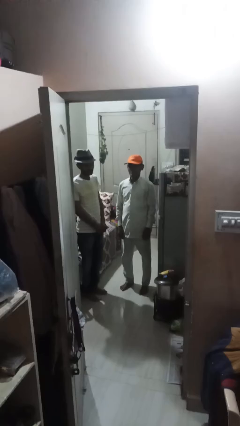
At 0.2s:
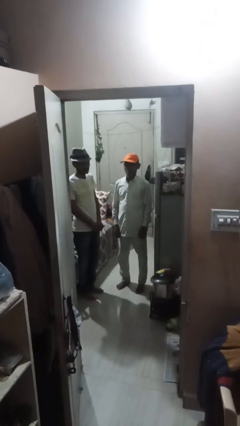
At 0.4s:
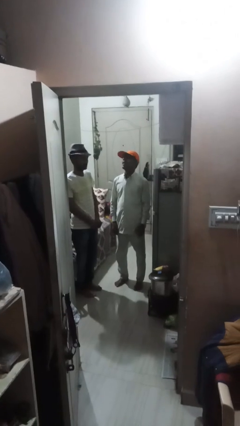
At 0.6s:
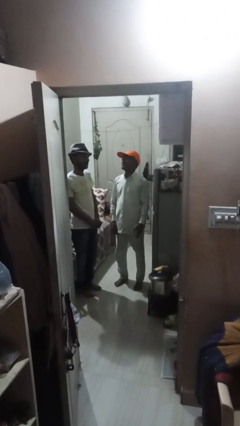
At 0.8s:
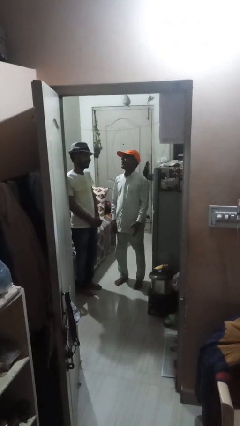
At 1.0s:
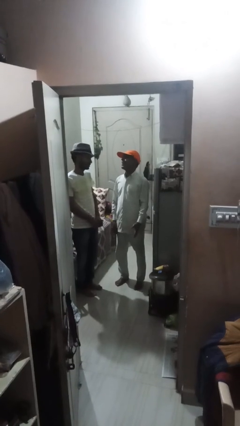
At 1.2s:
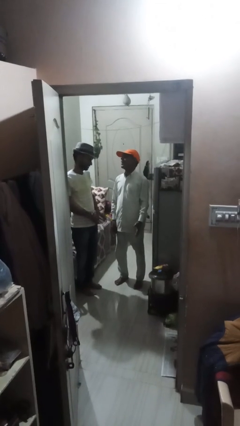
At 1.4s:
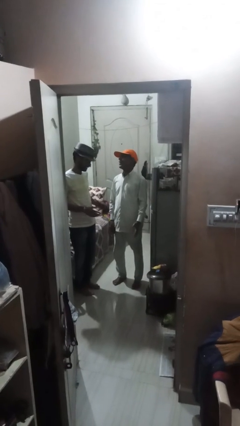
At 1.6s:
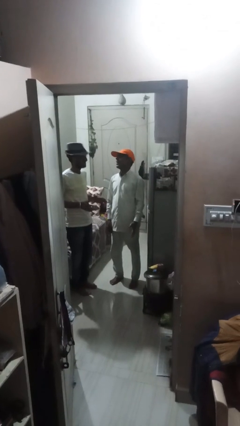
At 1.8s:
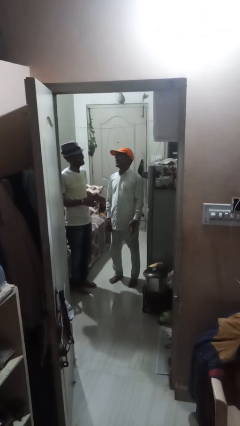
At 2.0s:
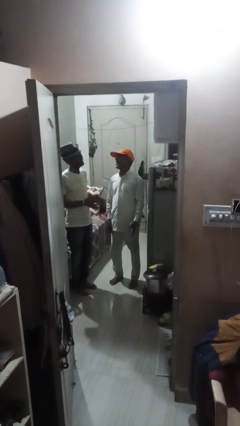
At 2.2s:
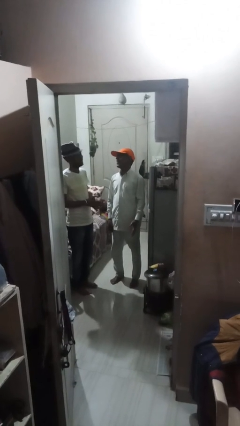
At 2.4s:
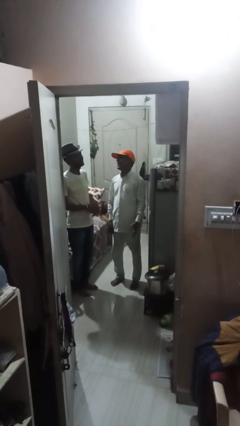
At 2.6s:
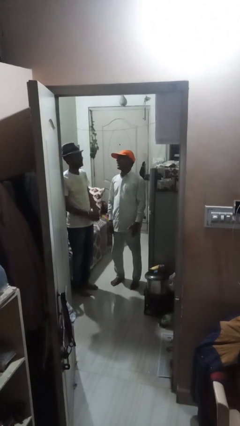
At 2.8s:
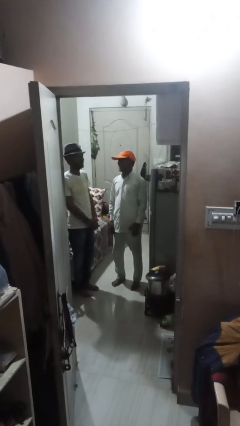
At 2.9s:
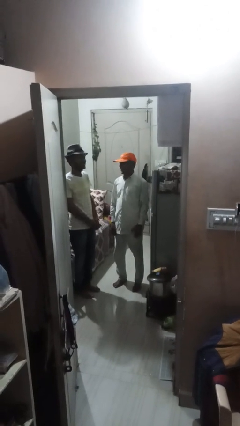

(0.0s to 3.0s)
person laughs with person

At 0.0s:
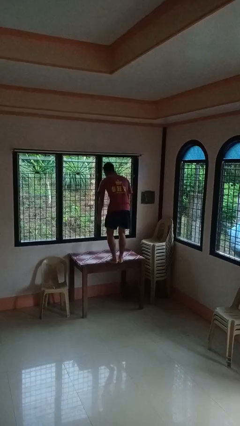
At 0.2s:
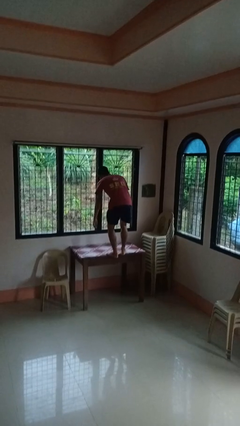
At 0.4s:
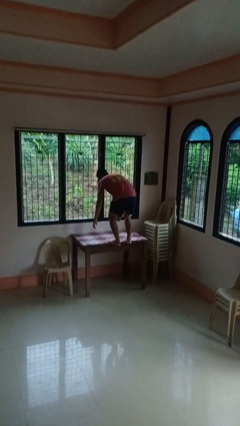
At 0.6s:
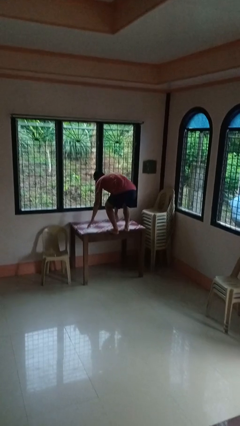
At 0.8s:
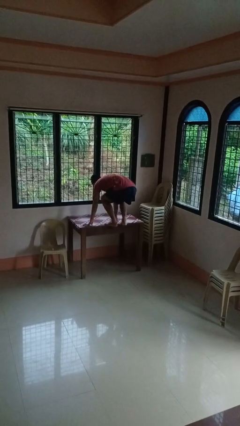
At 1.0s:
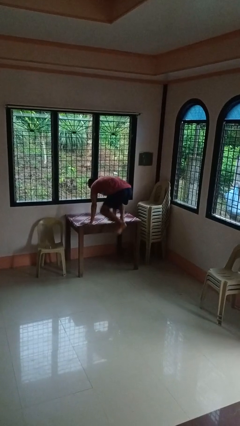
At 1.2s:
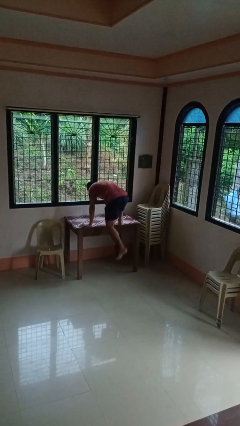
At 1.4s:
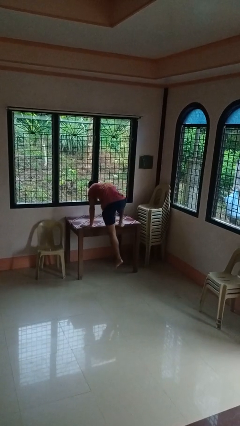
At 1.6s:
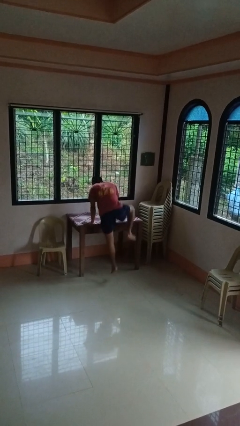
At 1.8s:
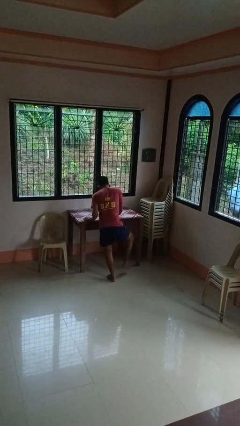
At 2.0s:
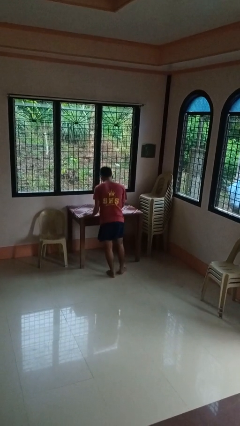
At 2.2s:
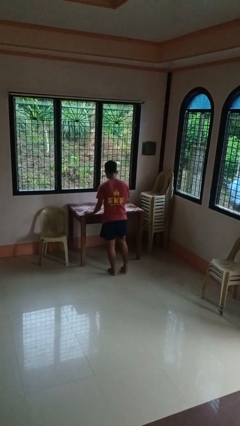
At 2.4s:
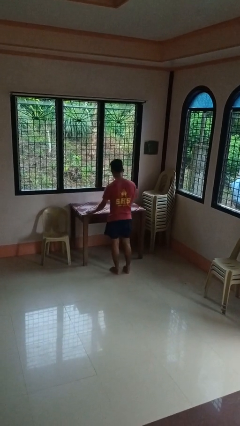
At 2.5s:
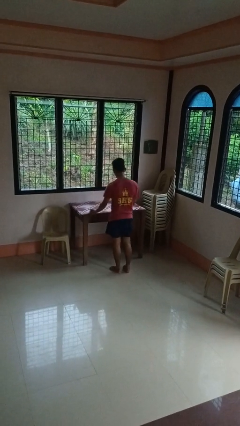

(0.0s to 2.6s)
person climbs off table

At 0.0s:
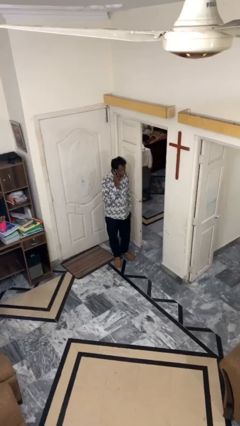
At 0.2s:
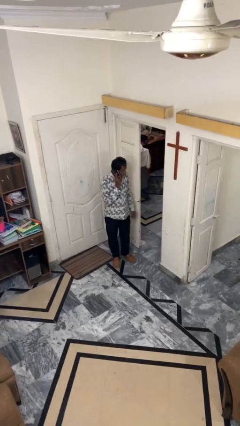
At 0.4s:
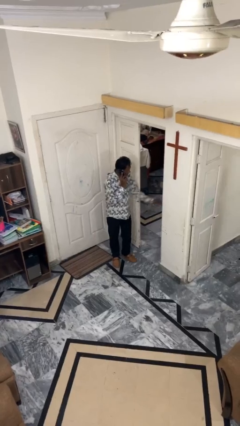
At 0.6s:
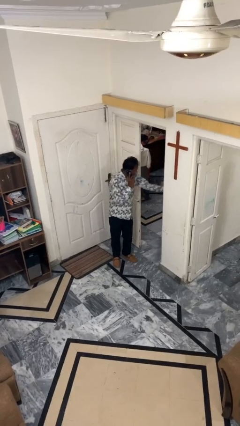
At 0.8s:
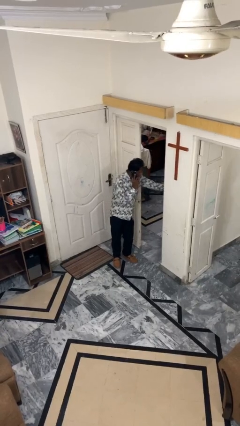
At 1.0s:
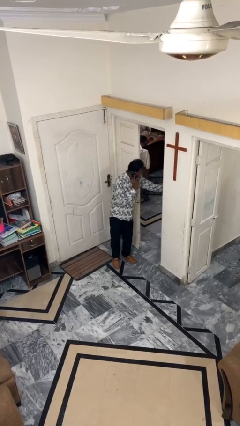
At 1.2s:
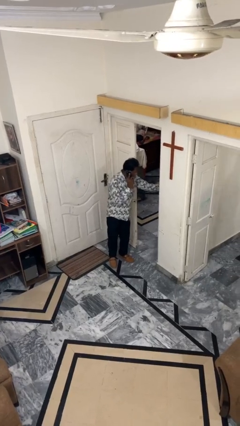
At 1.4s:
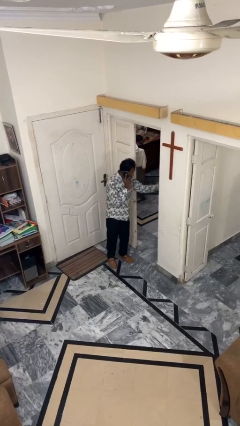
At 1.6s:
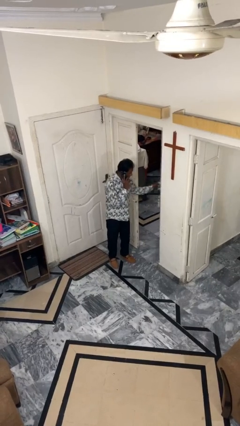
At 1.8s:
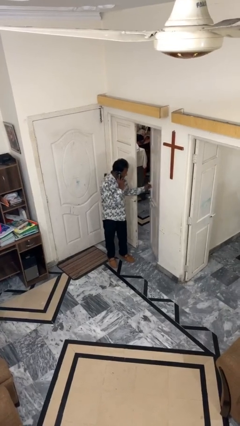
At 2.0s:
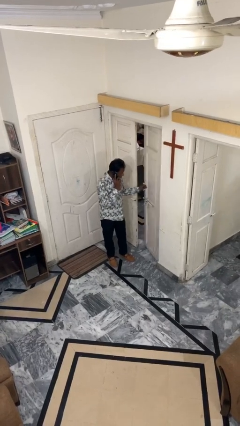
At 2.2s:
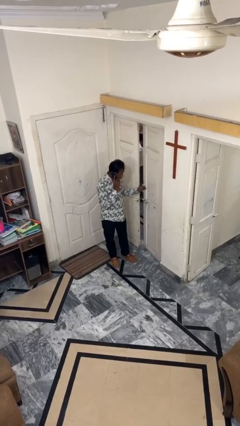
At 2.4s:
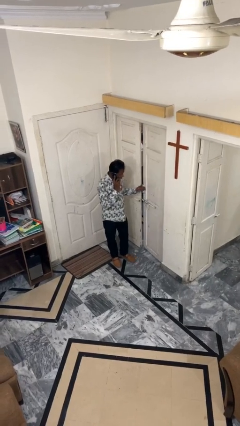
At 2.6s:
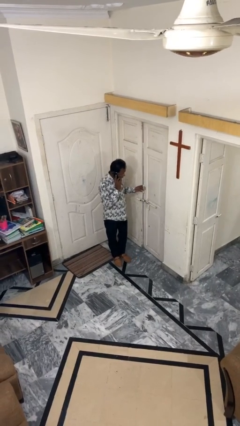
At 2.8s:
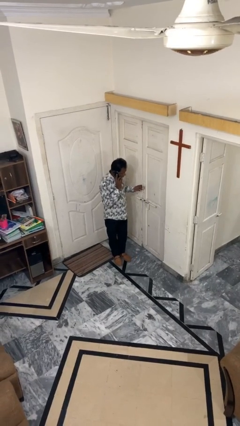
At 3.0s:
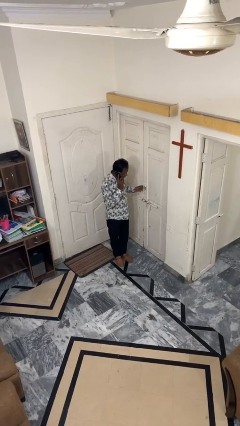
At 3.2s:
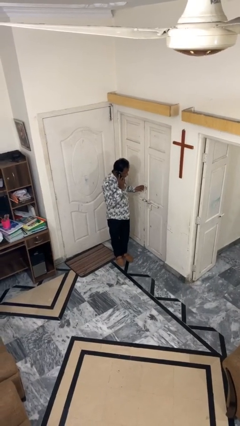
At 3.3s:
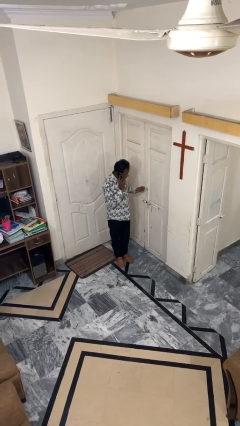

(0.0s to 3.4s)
person closes facility door

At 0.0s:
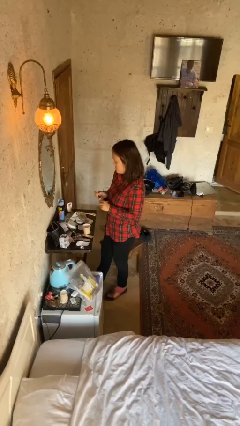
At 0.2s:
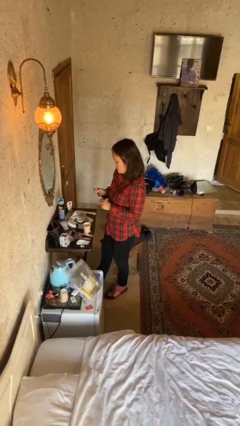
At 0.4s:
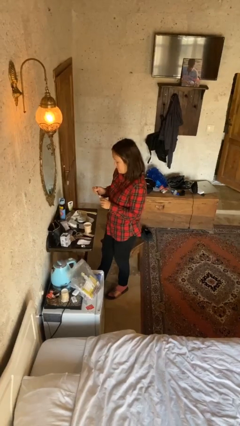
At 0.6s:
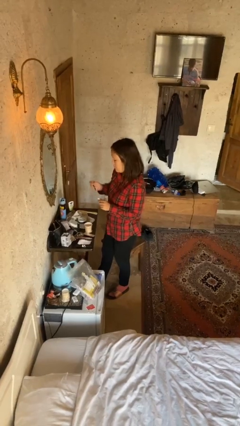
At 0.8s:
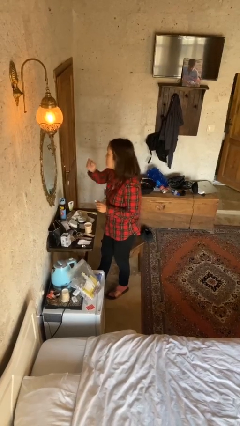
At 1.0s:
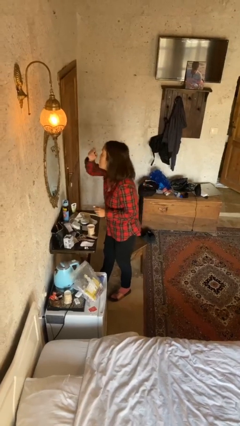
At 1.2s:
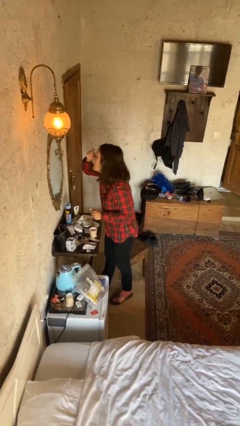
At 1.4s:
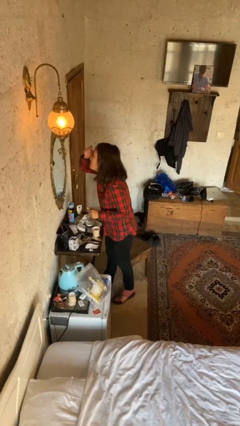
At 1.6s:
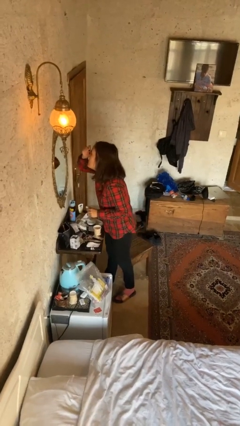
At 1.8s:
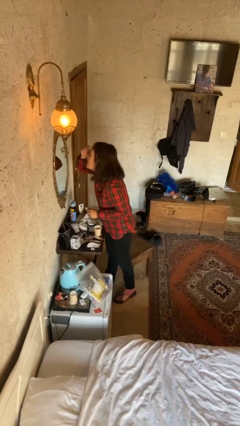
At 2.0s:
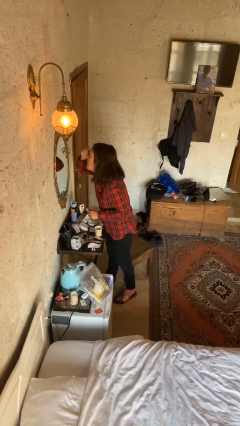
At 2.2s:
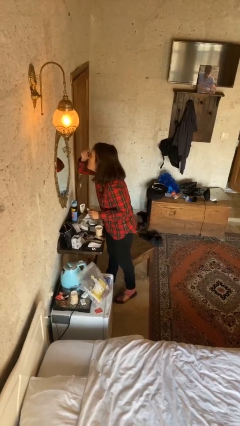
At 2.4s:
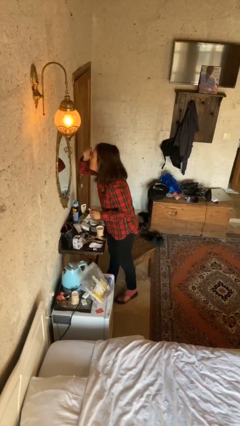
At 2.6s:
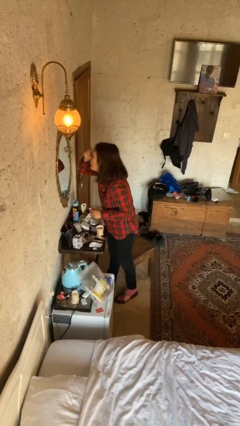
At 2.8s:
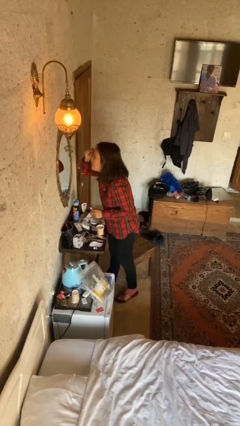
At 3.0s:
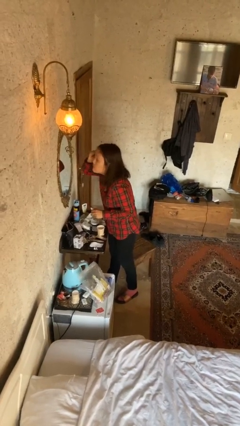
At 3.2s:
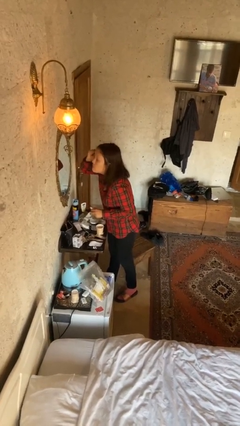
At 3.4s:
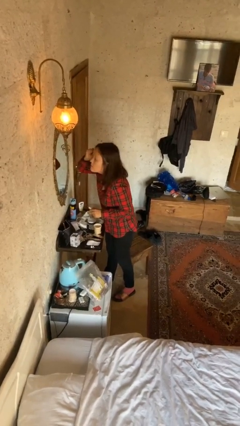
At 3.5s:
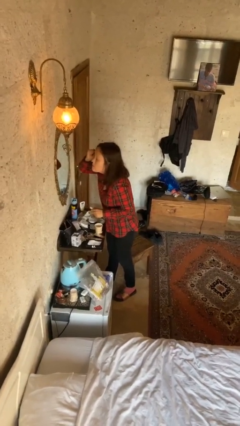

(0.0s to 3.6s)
person applies eye makeup

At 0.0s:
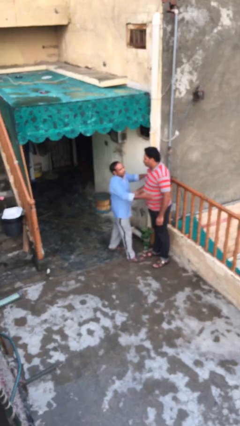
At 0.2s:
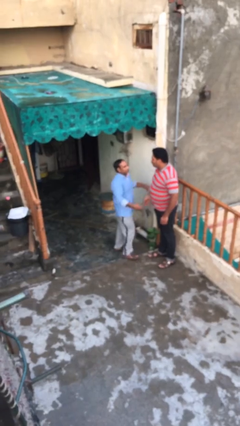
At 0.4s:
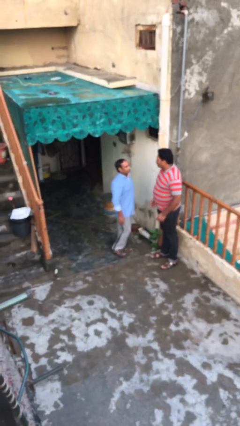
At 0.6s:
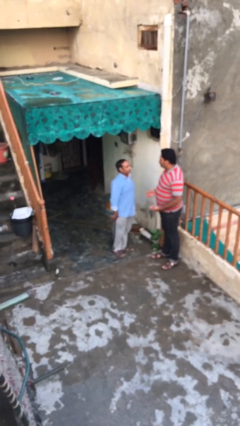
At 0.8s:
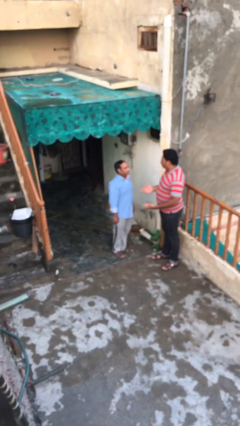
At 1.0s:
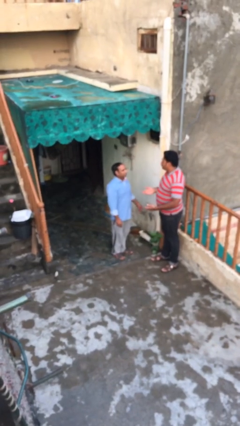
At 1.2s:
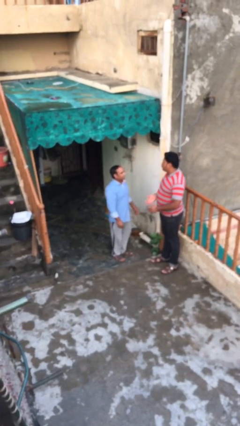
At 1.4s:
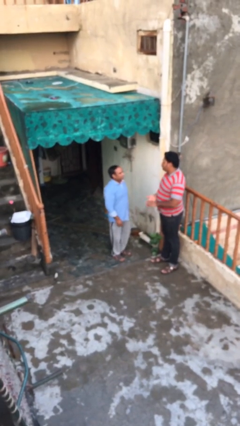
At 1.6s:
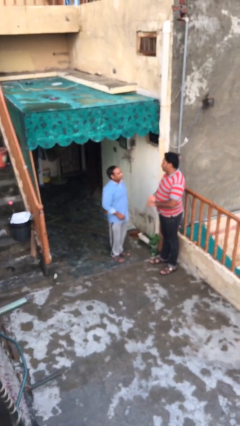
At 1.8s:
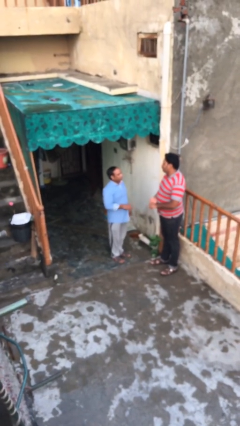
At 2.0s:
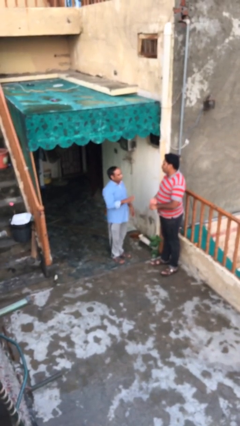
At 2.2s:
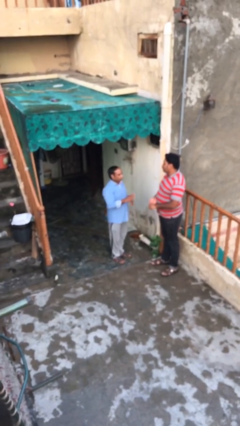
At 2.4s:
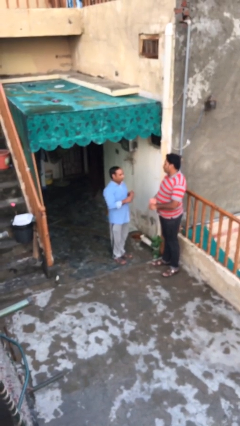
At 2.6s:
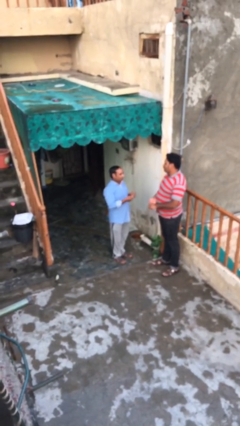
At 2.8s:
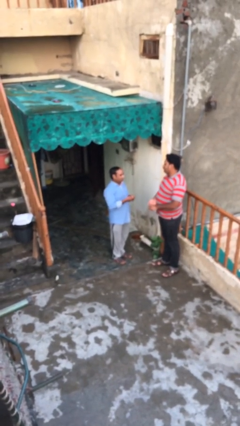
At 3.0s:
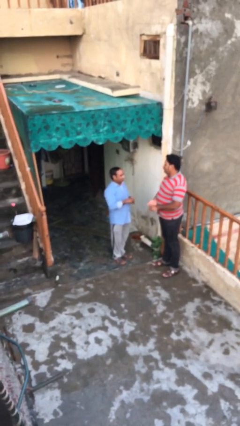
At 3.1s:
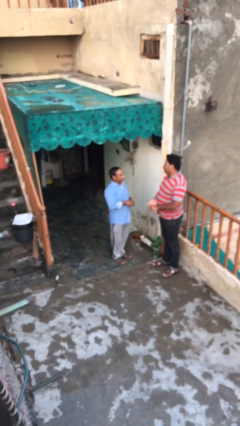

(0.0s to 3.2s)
person talks to person

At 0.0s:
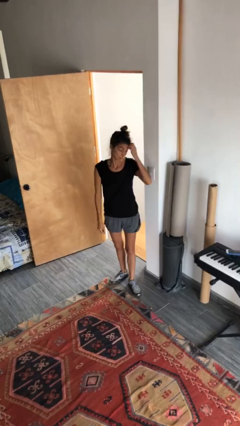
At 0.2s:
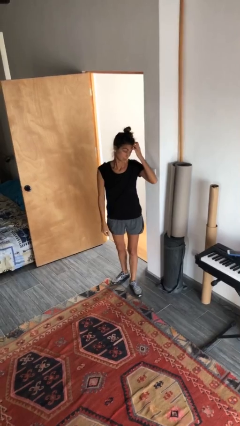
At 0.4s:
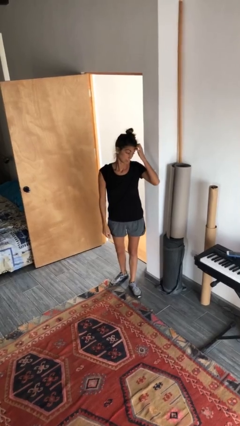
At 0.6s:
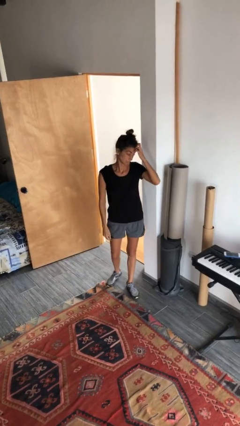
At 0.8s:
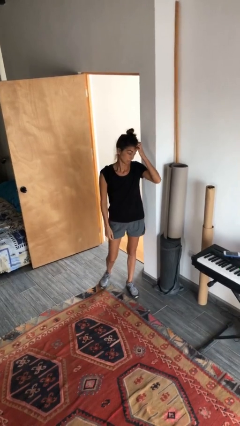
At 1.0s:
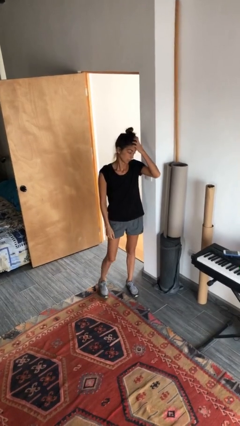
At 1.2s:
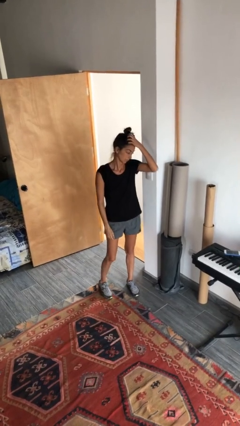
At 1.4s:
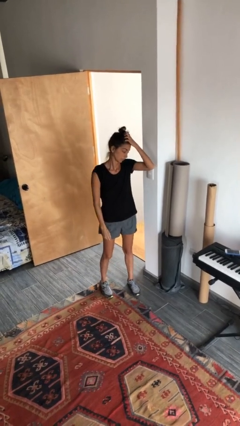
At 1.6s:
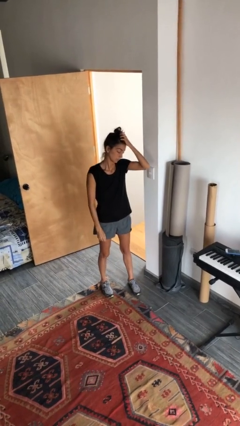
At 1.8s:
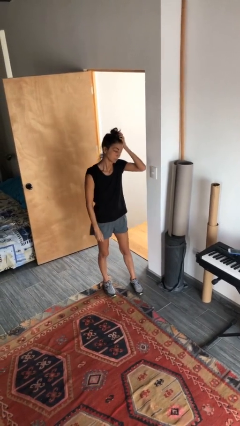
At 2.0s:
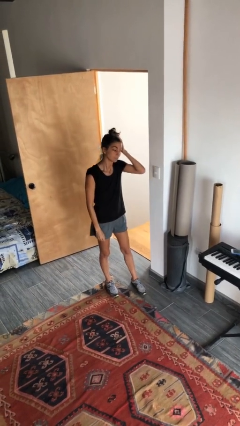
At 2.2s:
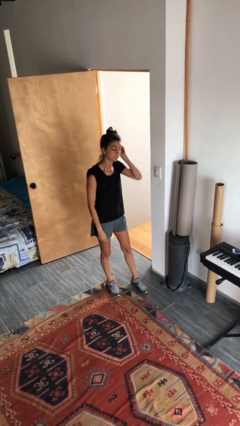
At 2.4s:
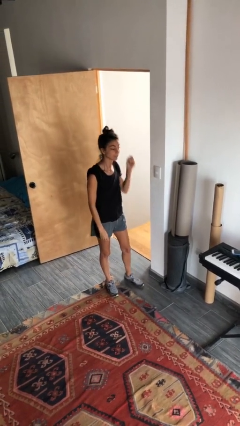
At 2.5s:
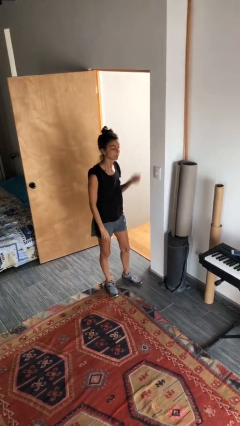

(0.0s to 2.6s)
person scratches face
